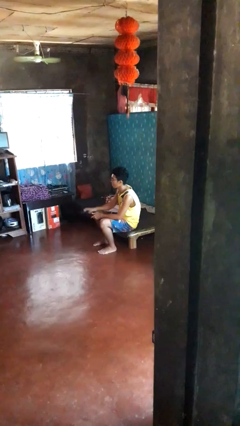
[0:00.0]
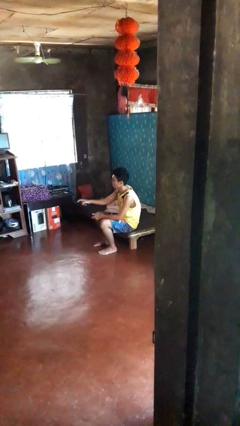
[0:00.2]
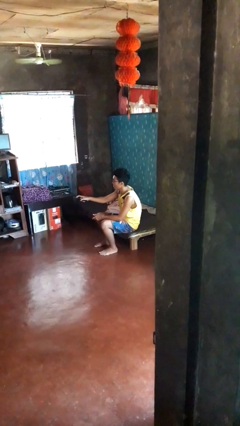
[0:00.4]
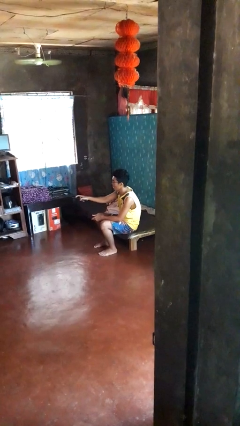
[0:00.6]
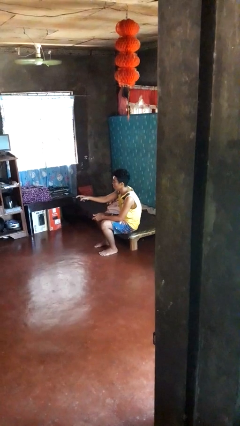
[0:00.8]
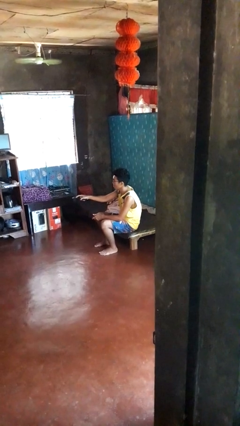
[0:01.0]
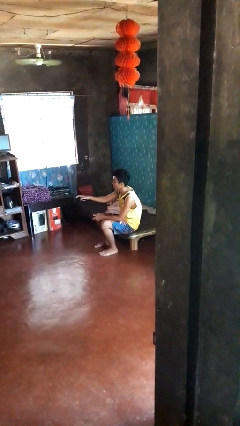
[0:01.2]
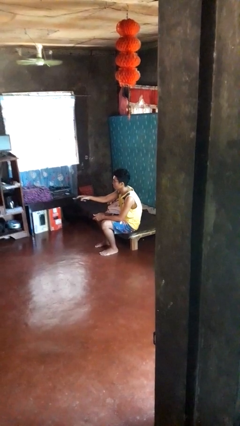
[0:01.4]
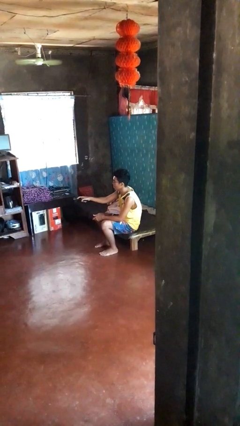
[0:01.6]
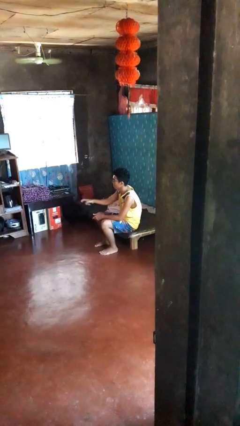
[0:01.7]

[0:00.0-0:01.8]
person uses television remote

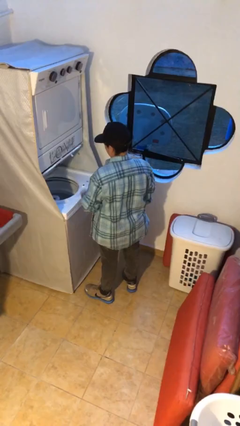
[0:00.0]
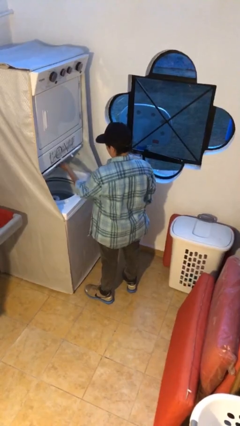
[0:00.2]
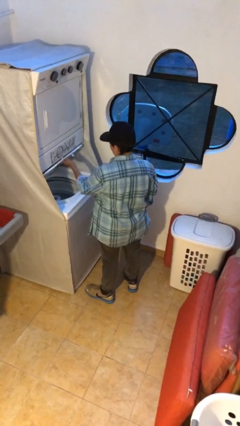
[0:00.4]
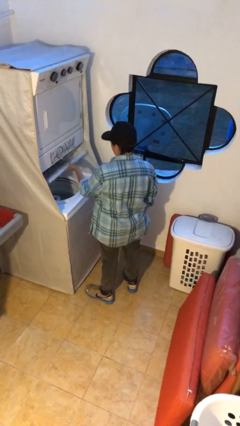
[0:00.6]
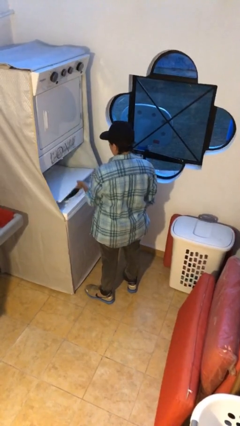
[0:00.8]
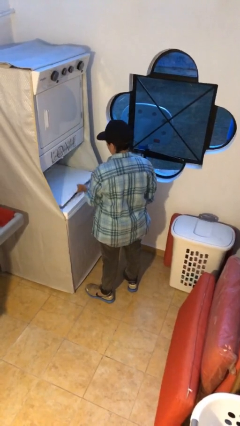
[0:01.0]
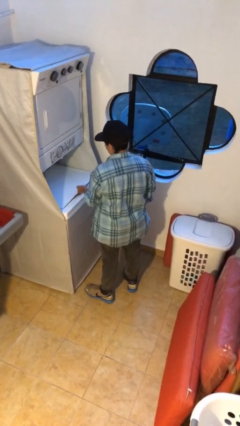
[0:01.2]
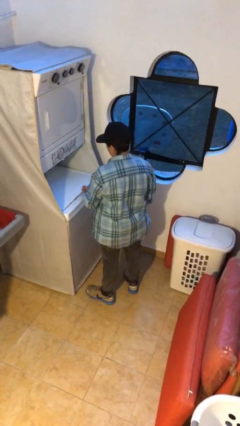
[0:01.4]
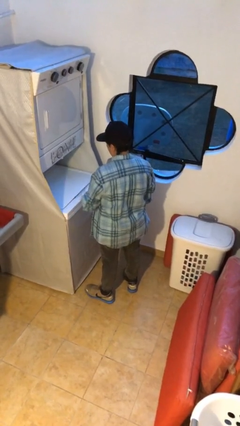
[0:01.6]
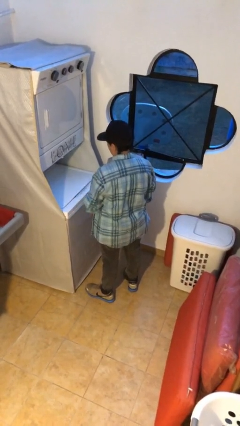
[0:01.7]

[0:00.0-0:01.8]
person closes clothes washer

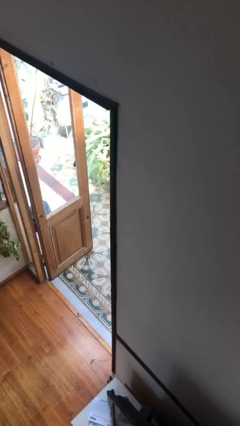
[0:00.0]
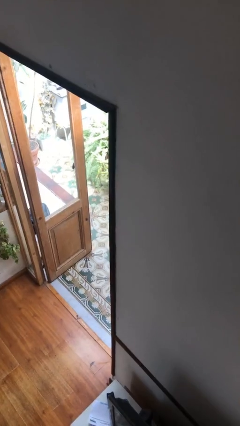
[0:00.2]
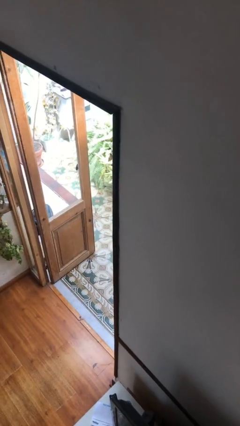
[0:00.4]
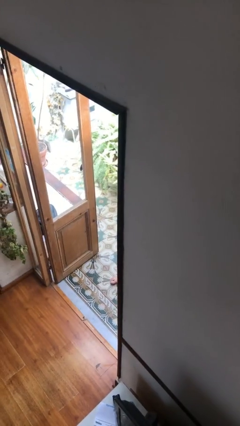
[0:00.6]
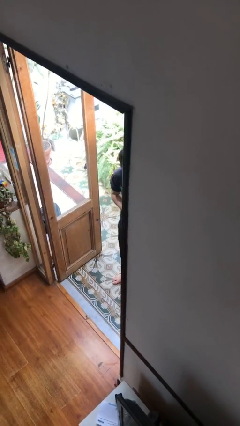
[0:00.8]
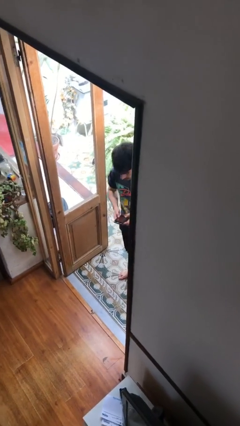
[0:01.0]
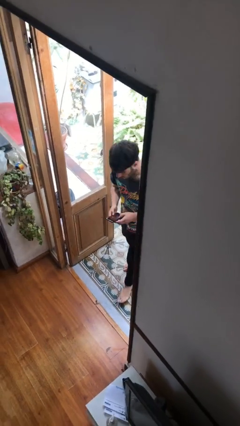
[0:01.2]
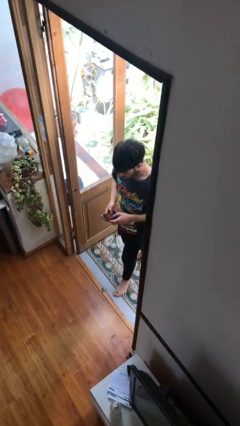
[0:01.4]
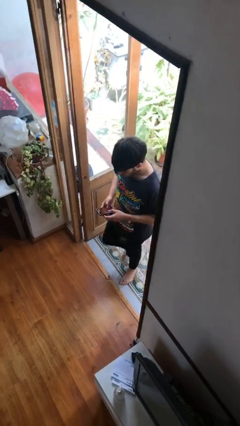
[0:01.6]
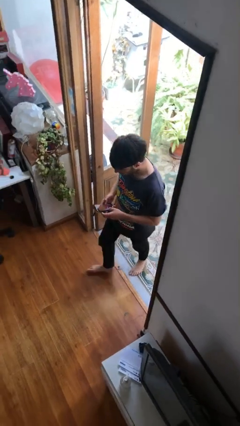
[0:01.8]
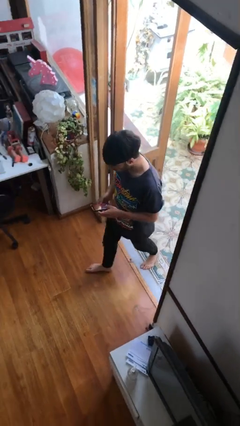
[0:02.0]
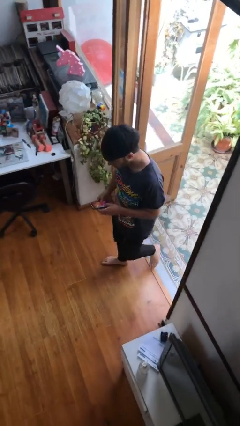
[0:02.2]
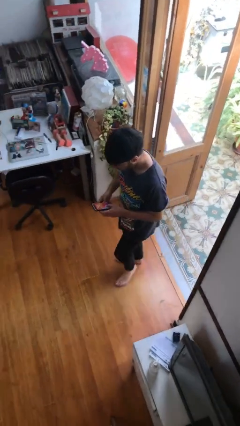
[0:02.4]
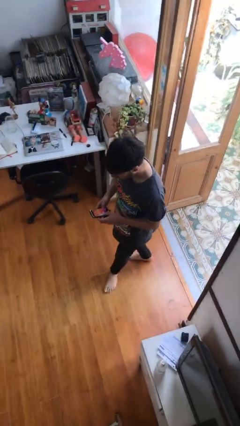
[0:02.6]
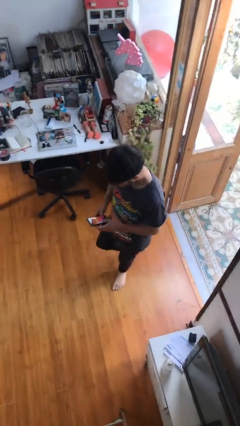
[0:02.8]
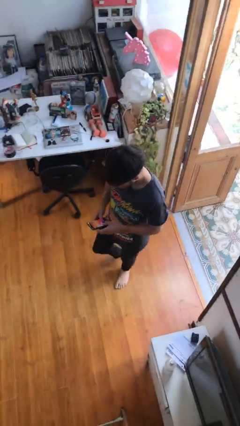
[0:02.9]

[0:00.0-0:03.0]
person enters scene through structure

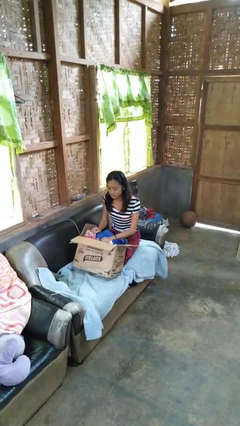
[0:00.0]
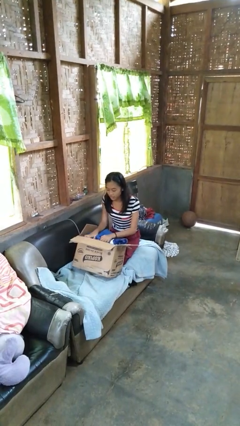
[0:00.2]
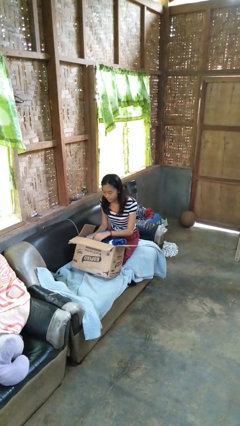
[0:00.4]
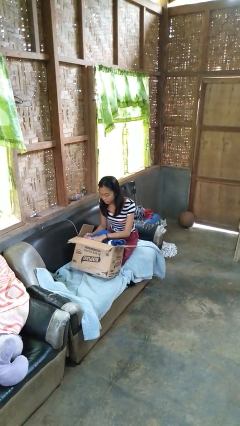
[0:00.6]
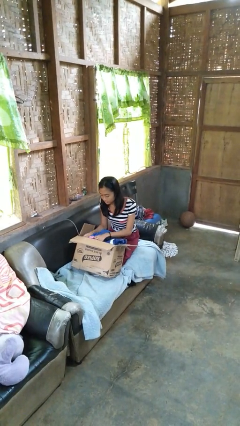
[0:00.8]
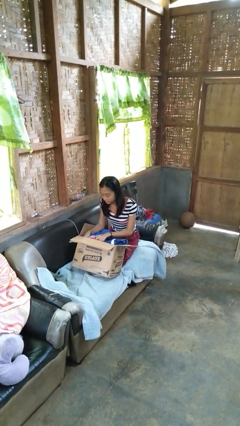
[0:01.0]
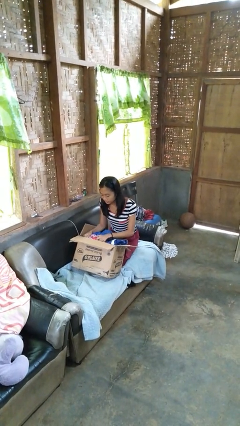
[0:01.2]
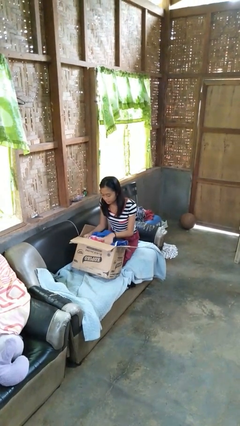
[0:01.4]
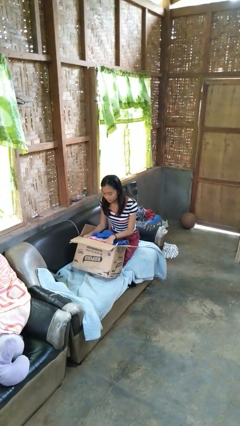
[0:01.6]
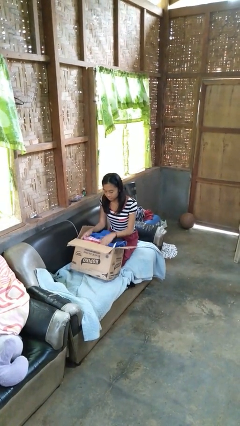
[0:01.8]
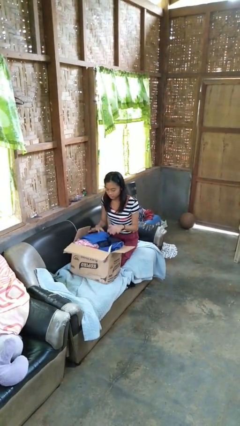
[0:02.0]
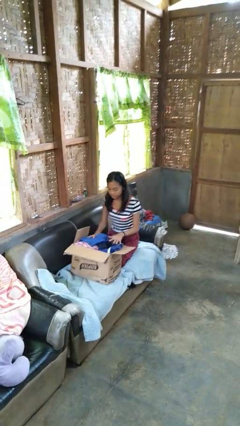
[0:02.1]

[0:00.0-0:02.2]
person searches in box

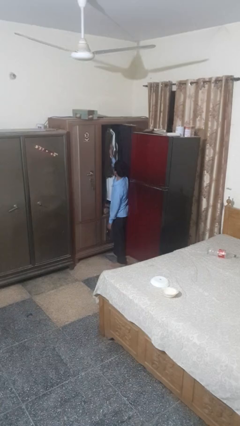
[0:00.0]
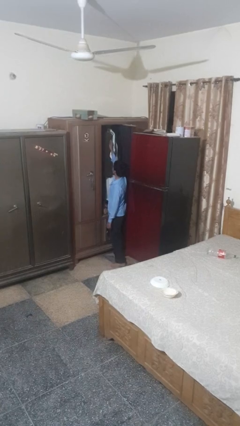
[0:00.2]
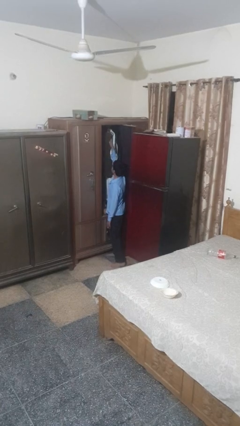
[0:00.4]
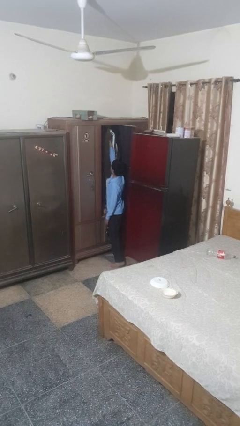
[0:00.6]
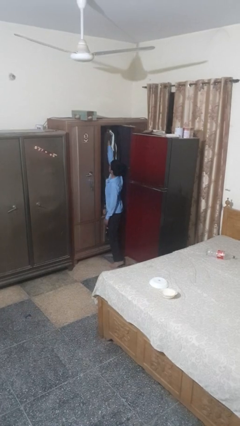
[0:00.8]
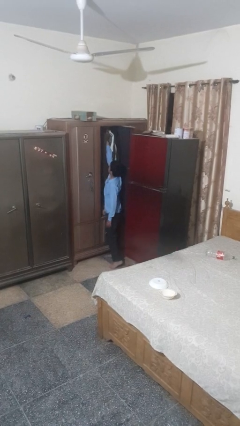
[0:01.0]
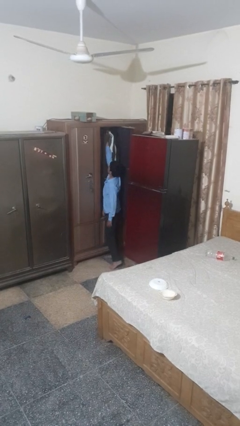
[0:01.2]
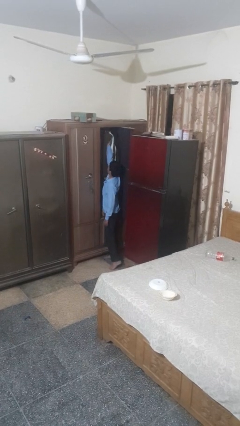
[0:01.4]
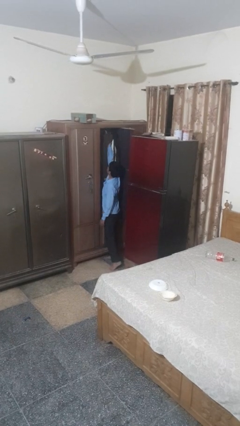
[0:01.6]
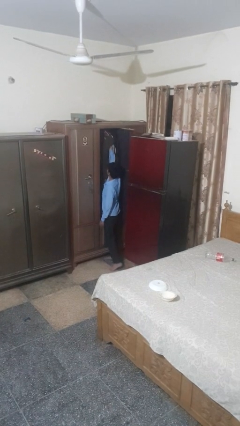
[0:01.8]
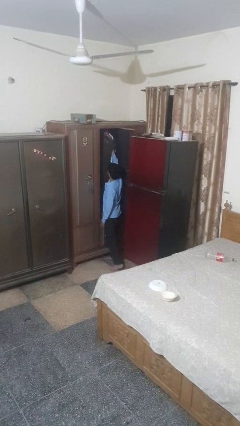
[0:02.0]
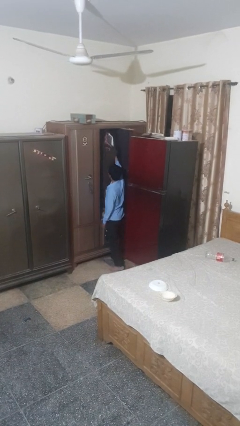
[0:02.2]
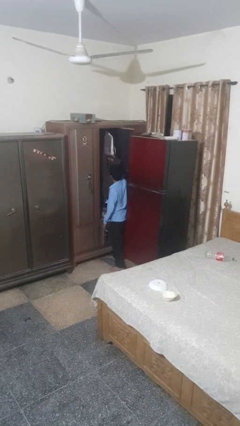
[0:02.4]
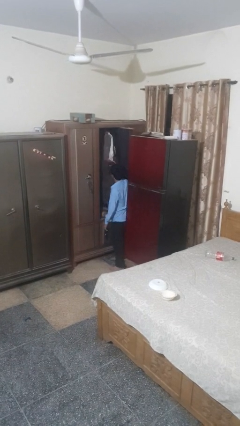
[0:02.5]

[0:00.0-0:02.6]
person takes clothes from closet

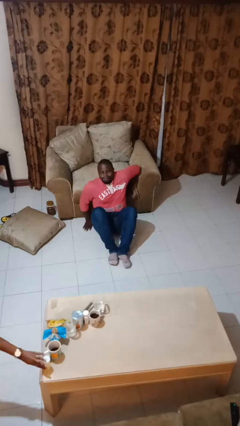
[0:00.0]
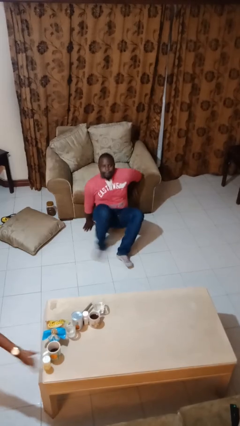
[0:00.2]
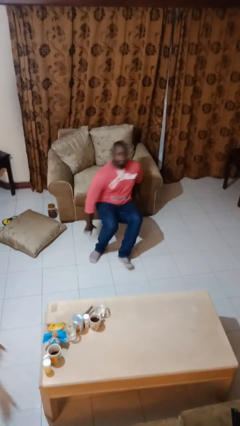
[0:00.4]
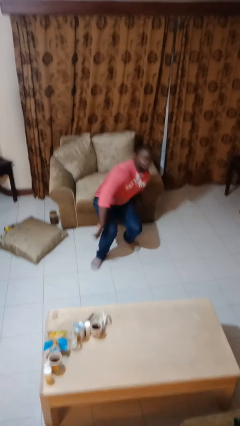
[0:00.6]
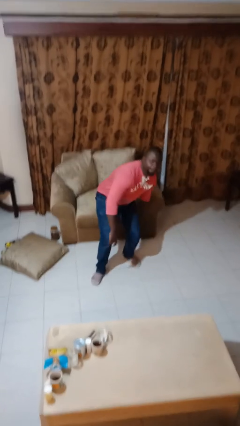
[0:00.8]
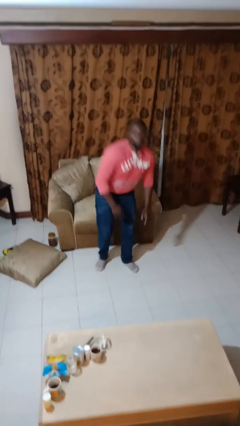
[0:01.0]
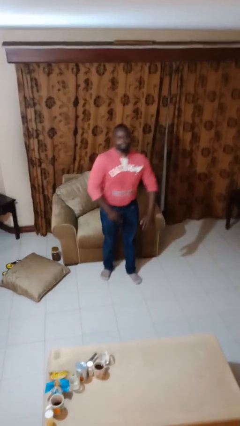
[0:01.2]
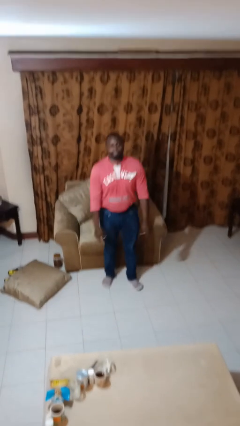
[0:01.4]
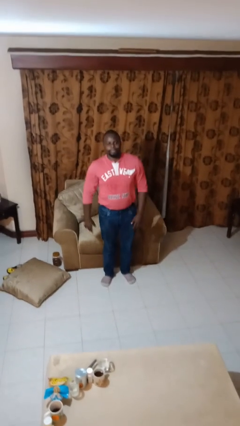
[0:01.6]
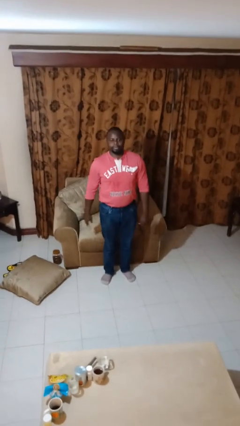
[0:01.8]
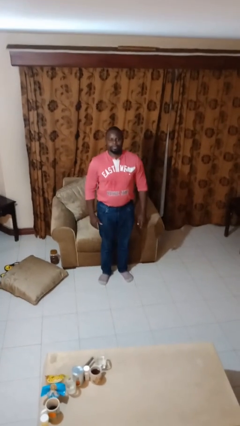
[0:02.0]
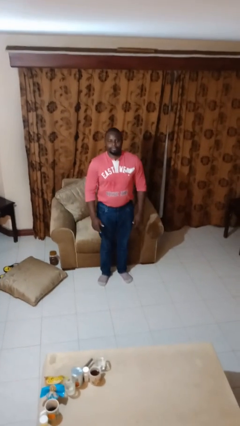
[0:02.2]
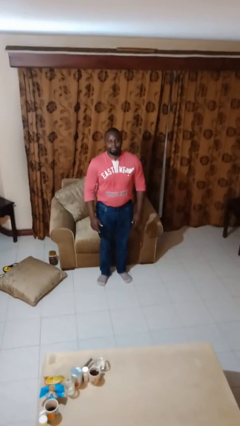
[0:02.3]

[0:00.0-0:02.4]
person stands up from floor

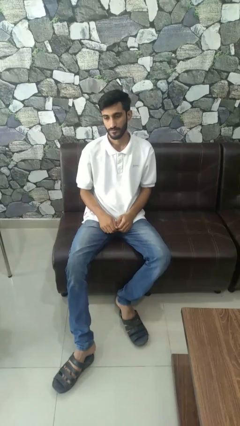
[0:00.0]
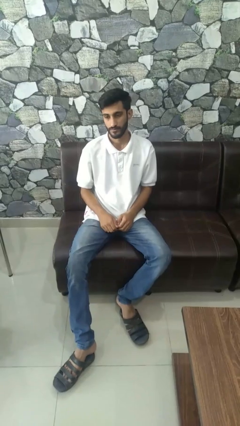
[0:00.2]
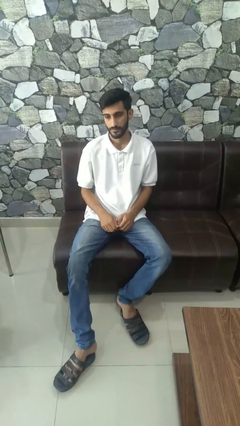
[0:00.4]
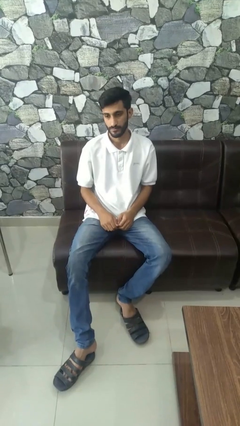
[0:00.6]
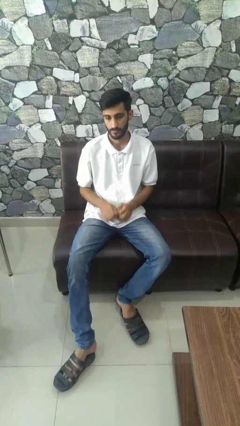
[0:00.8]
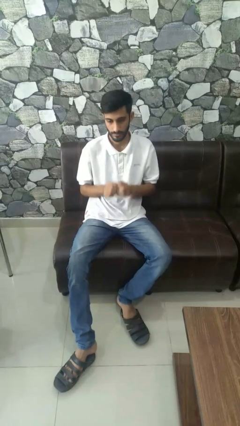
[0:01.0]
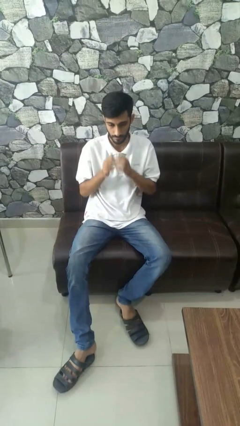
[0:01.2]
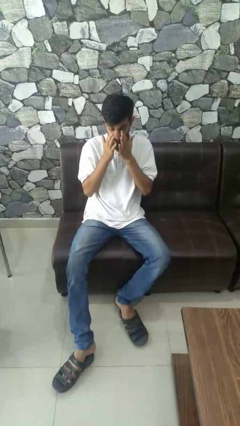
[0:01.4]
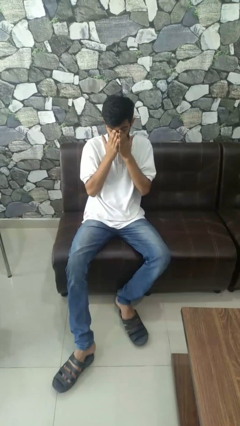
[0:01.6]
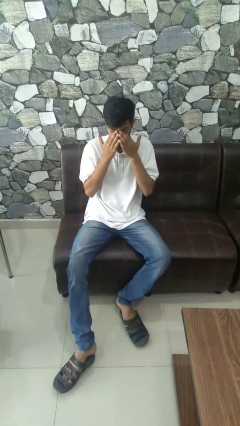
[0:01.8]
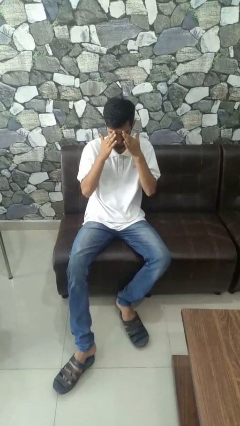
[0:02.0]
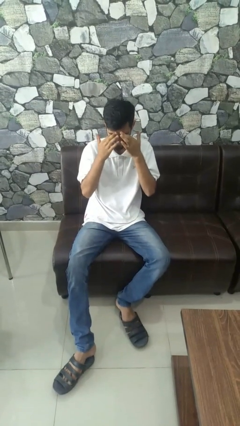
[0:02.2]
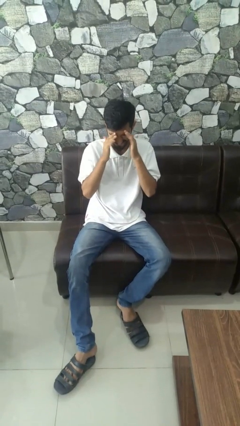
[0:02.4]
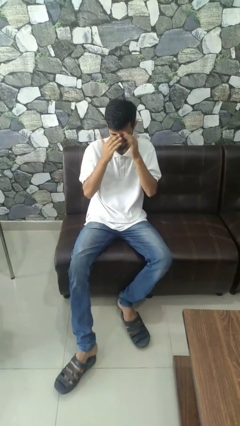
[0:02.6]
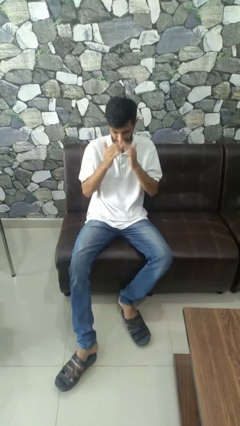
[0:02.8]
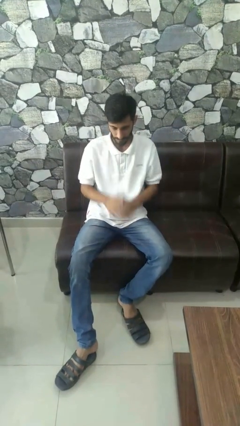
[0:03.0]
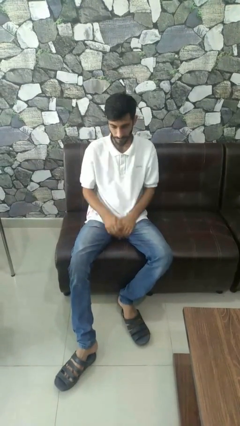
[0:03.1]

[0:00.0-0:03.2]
person rubs eyes

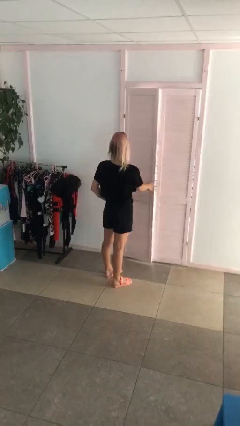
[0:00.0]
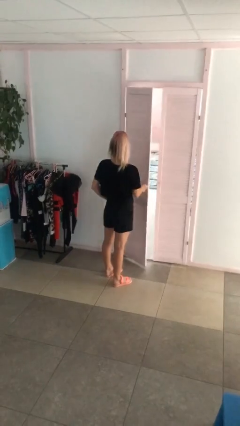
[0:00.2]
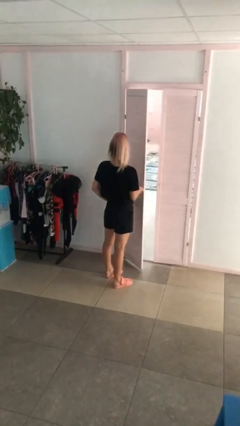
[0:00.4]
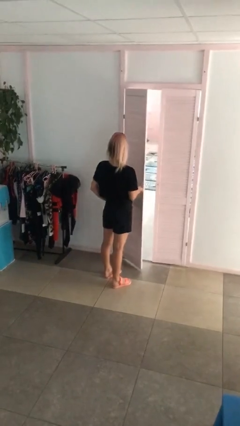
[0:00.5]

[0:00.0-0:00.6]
person opens facility door
